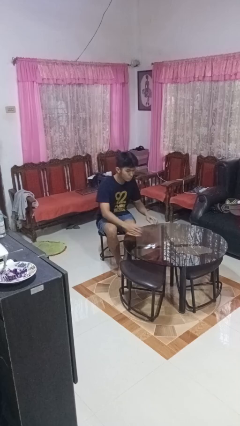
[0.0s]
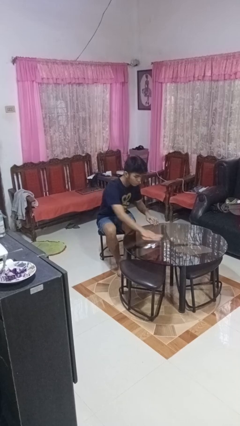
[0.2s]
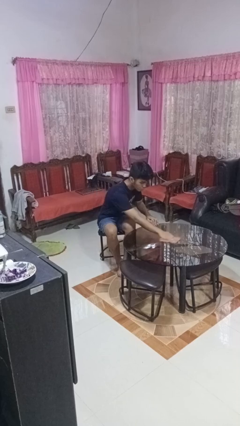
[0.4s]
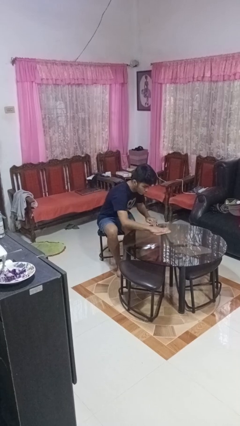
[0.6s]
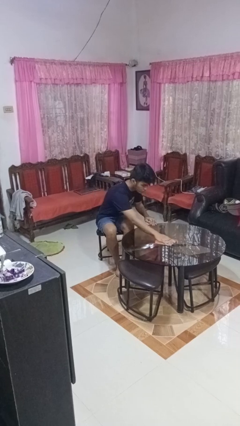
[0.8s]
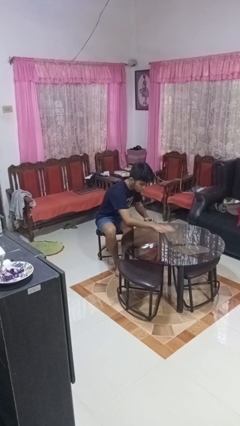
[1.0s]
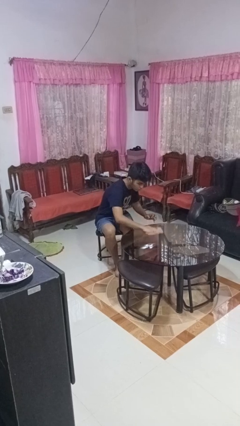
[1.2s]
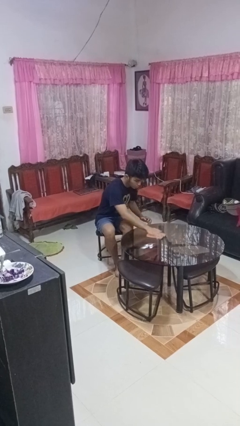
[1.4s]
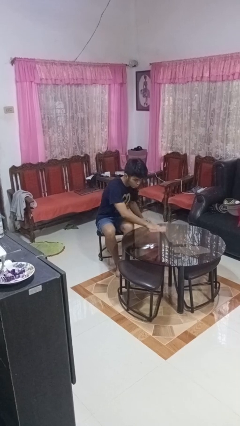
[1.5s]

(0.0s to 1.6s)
person cleans table with rag

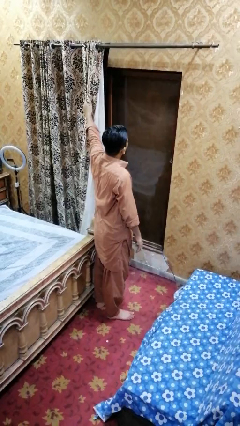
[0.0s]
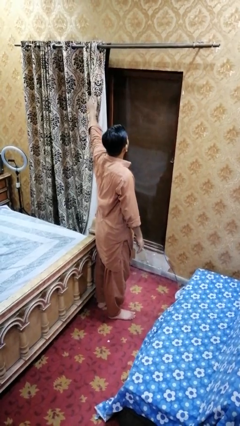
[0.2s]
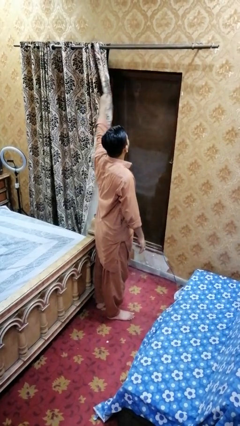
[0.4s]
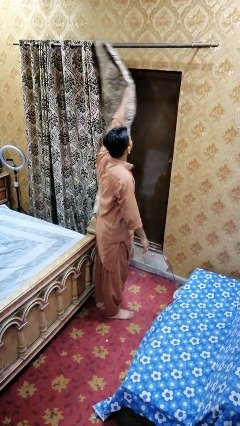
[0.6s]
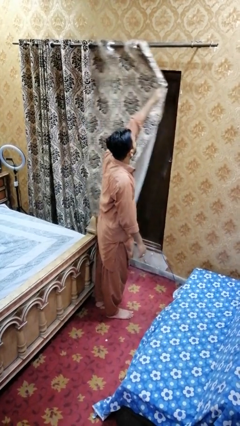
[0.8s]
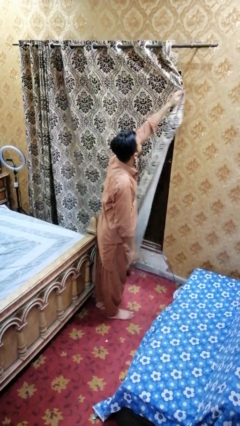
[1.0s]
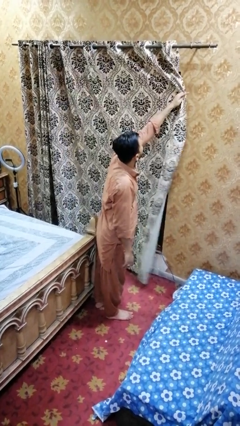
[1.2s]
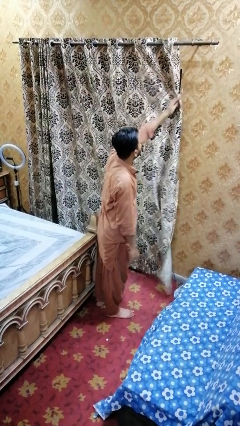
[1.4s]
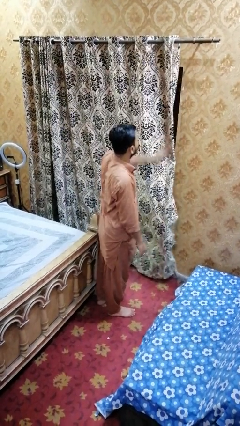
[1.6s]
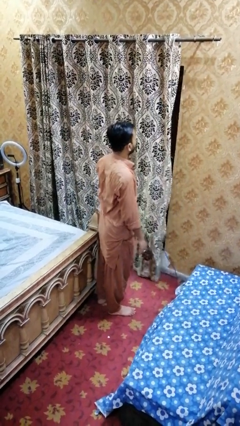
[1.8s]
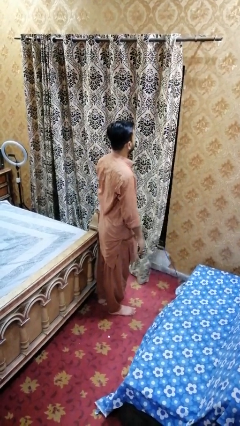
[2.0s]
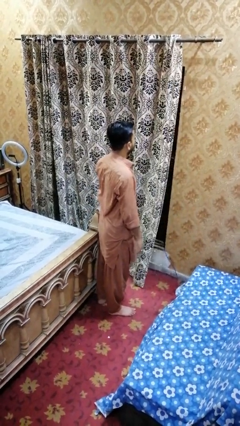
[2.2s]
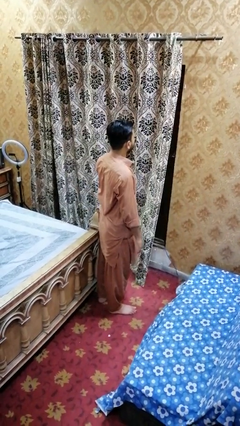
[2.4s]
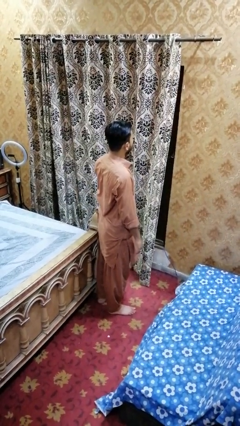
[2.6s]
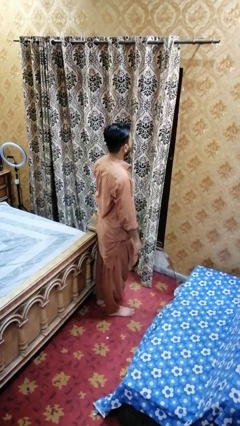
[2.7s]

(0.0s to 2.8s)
person closes curtains

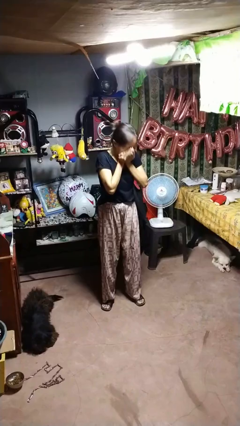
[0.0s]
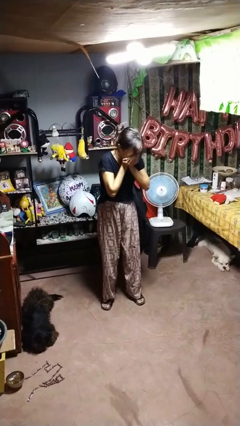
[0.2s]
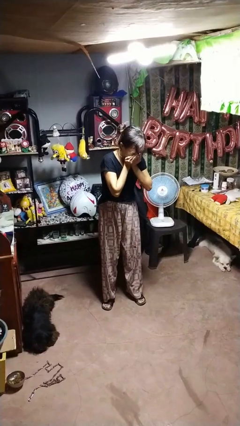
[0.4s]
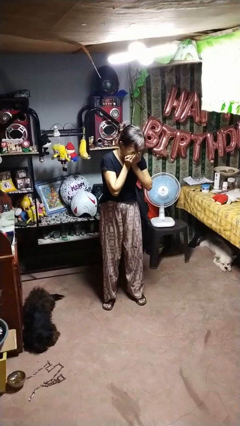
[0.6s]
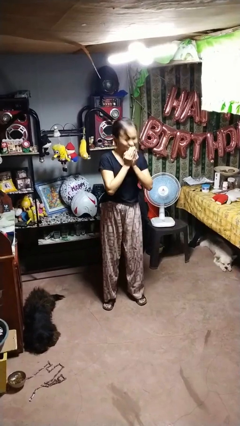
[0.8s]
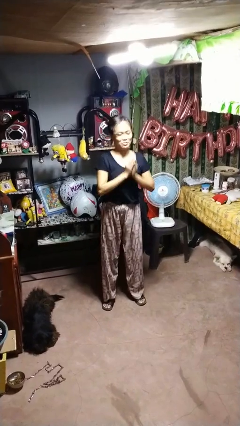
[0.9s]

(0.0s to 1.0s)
person sneezes into hand

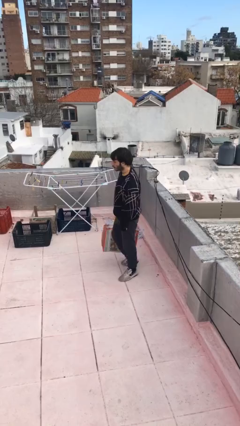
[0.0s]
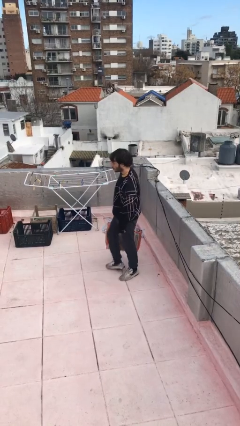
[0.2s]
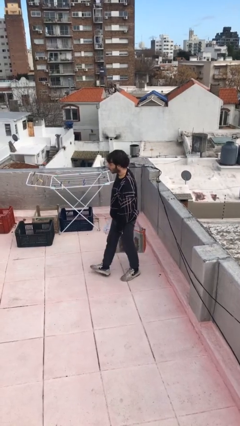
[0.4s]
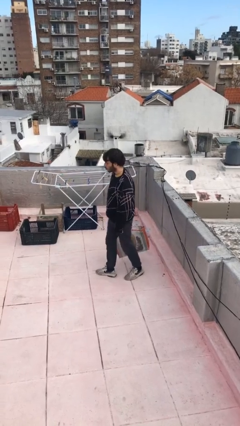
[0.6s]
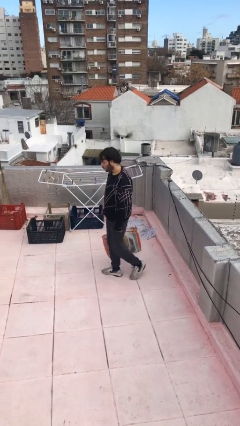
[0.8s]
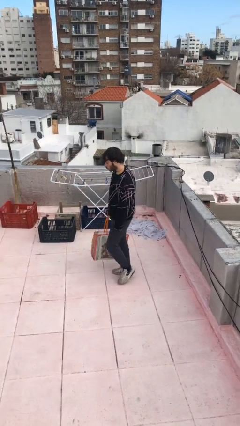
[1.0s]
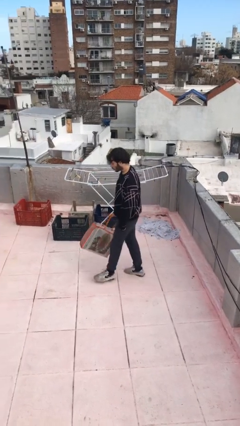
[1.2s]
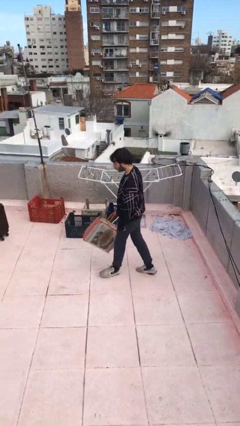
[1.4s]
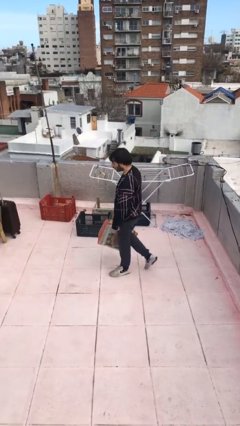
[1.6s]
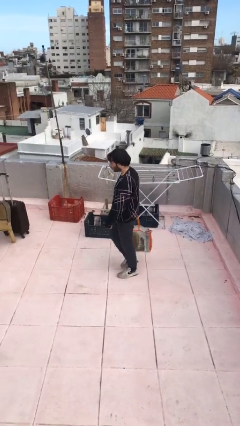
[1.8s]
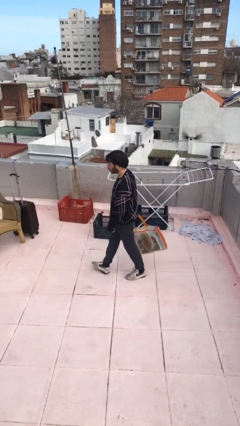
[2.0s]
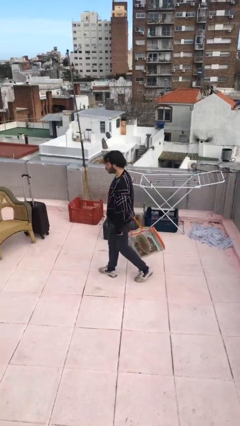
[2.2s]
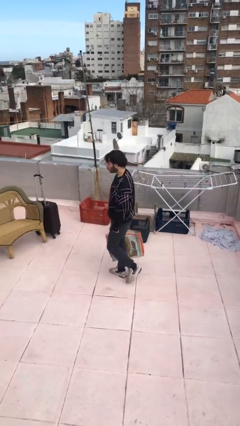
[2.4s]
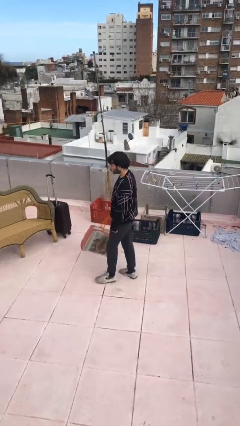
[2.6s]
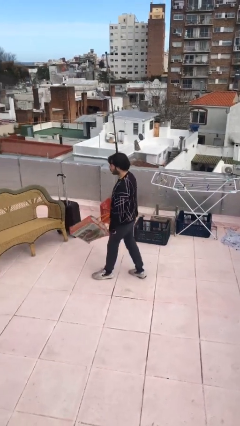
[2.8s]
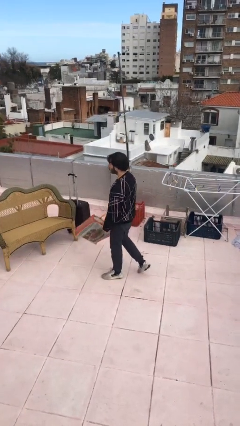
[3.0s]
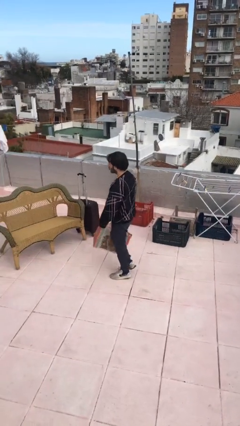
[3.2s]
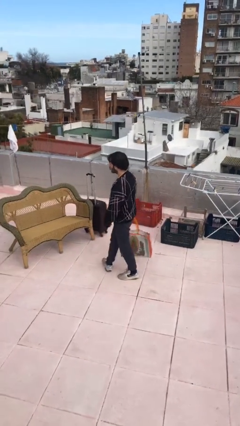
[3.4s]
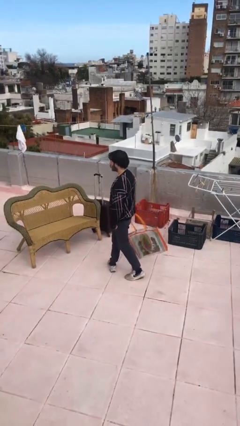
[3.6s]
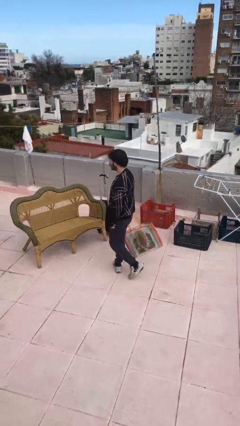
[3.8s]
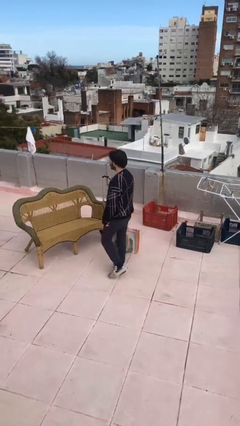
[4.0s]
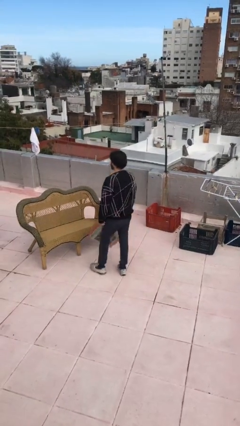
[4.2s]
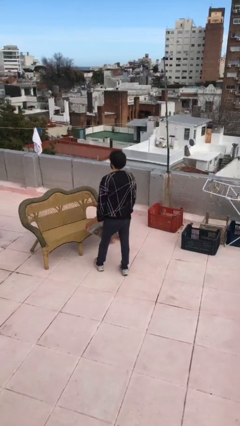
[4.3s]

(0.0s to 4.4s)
person carries groceries

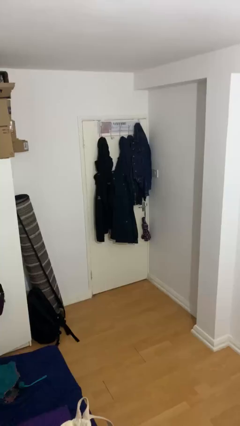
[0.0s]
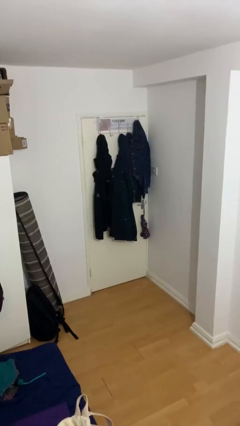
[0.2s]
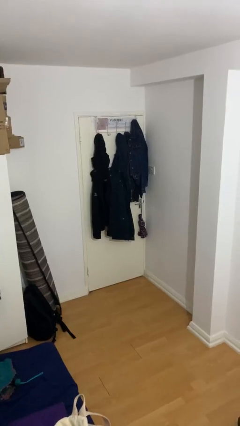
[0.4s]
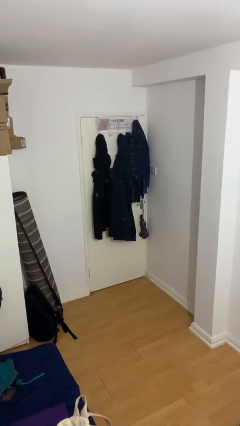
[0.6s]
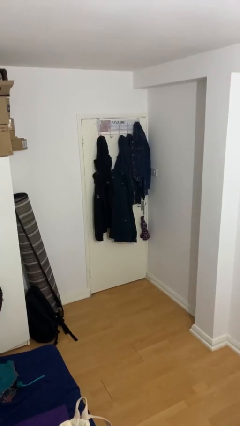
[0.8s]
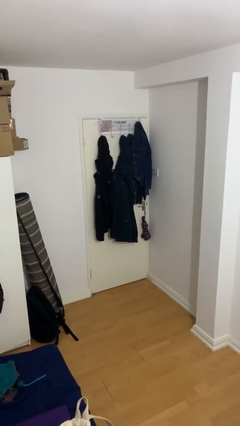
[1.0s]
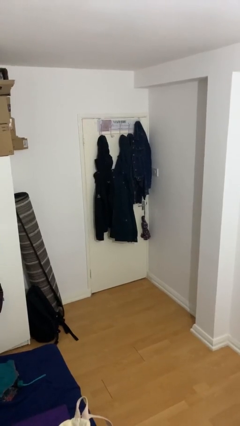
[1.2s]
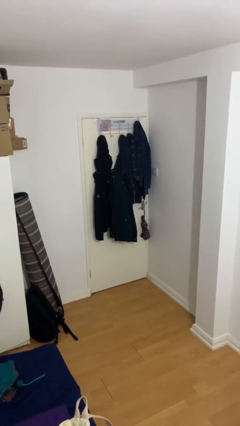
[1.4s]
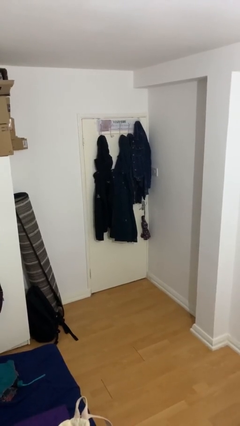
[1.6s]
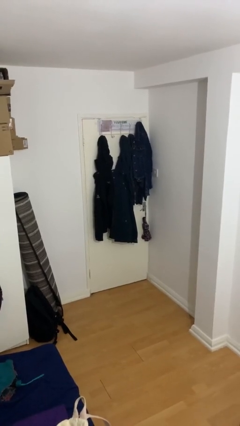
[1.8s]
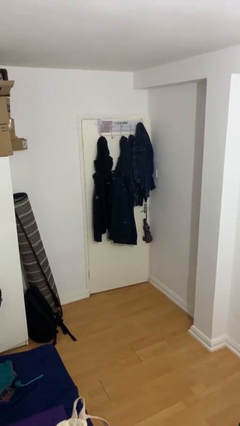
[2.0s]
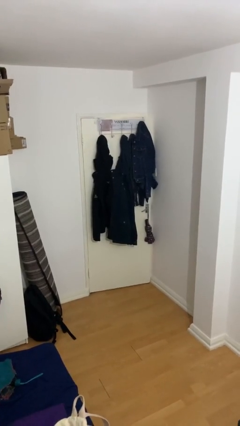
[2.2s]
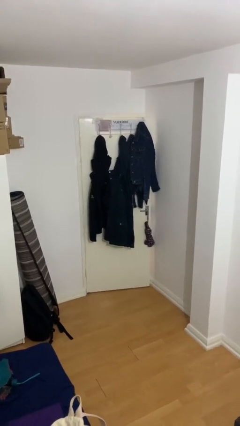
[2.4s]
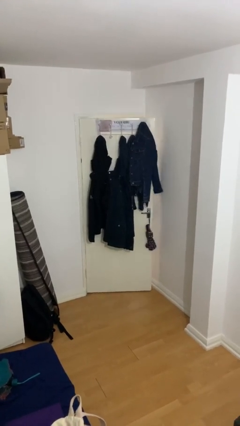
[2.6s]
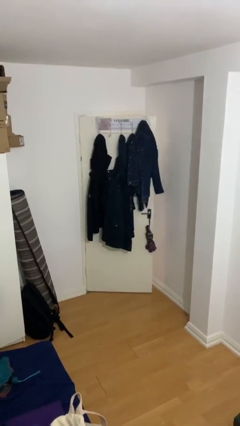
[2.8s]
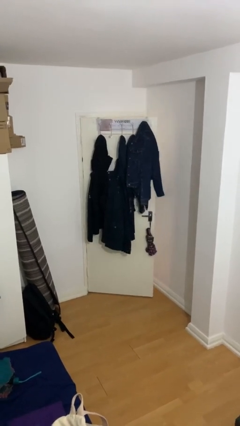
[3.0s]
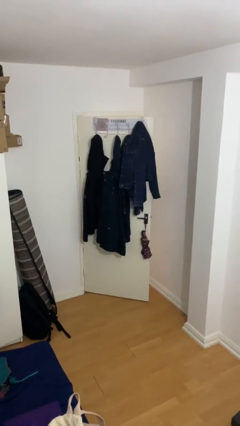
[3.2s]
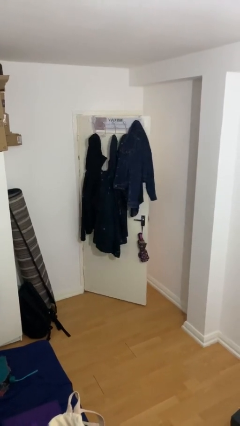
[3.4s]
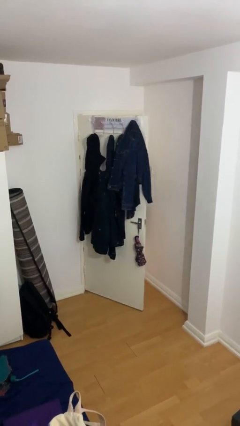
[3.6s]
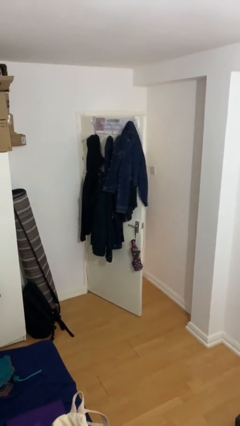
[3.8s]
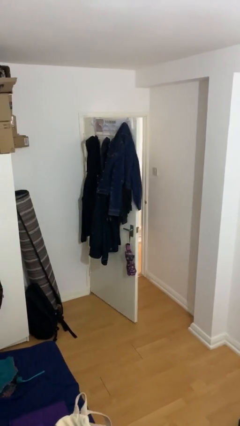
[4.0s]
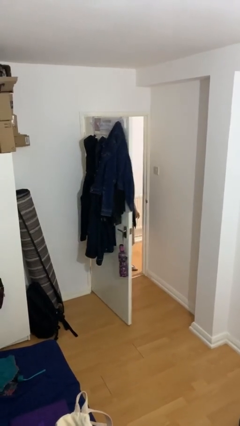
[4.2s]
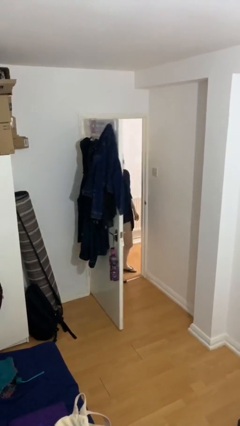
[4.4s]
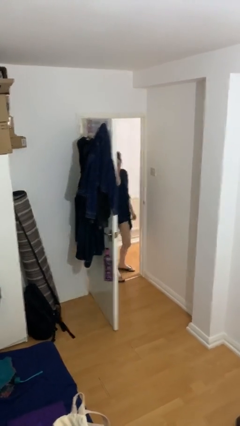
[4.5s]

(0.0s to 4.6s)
person opens facility door

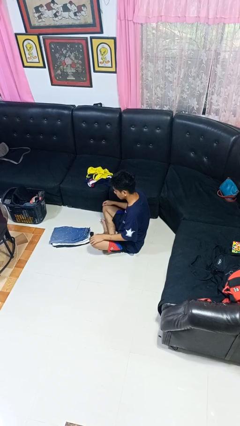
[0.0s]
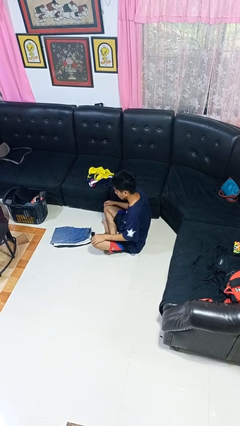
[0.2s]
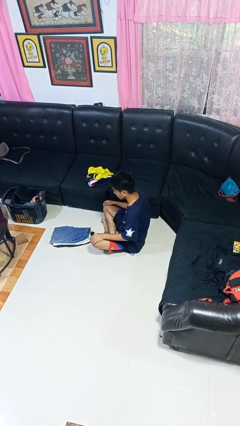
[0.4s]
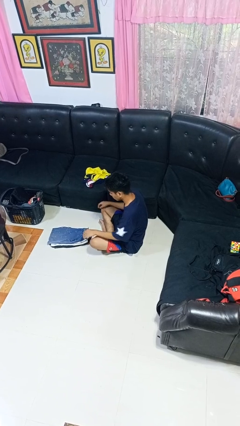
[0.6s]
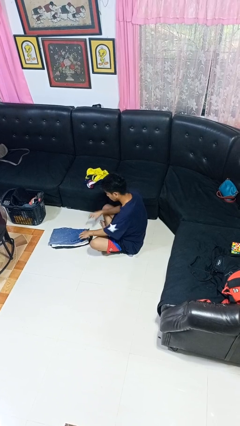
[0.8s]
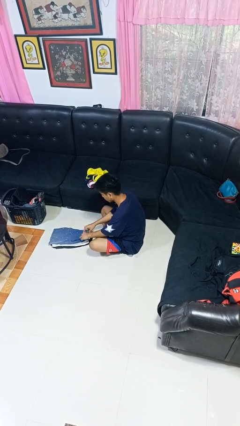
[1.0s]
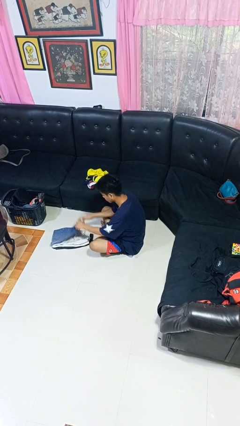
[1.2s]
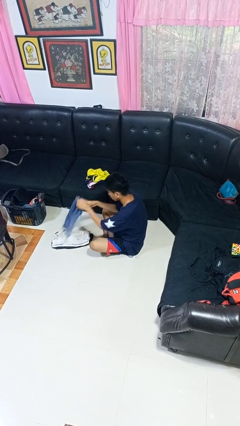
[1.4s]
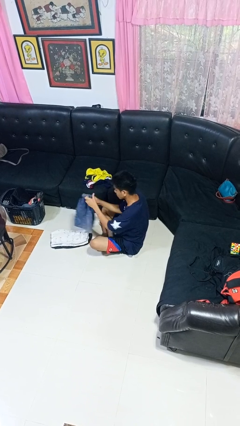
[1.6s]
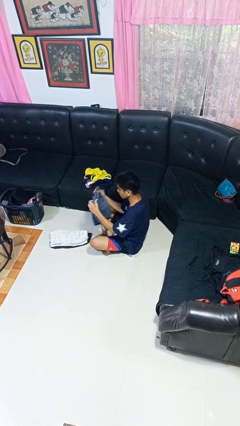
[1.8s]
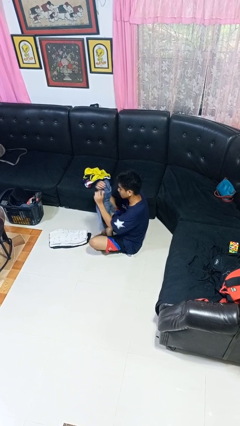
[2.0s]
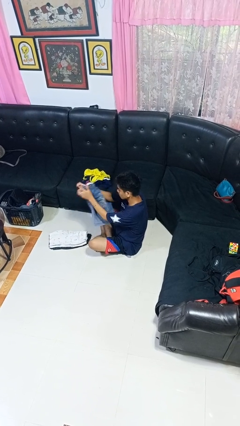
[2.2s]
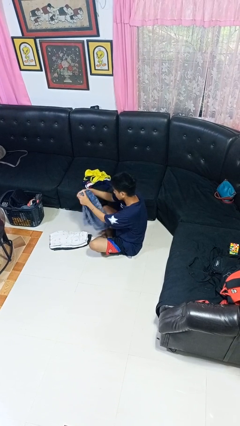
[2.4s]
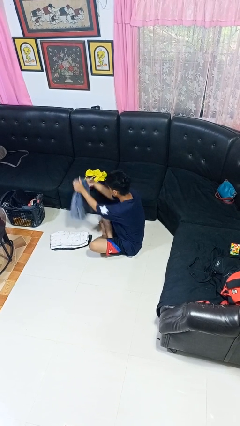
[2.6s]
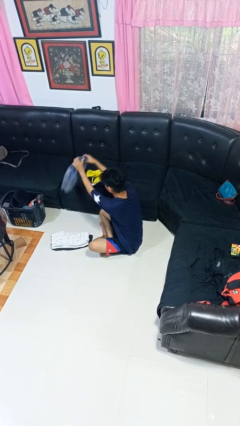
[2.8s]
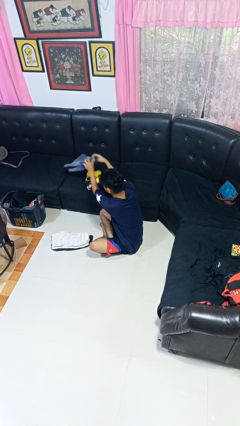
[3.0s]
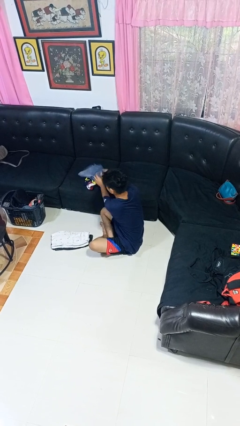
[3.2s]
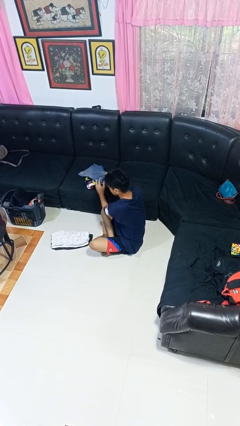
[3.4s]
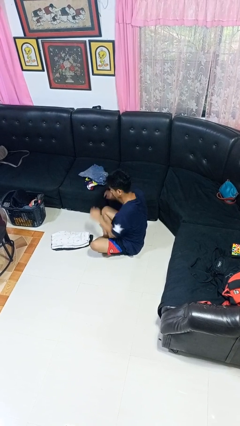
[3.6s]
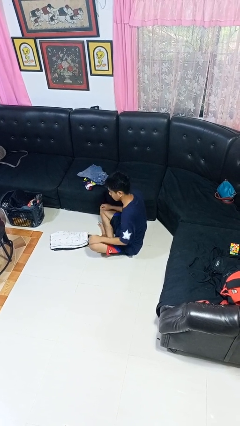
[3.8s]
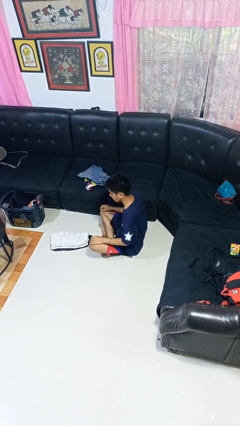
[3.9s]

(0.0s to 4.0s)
person folds pants
